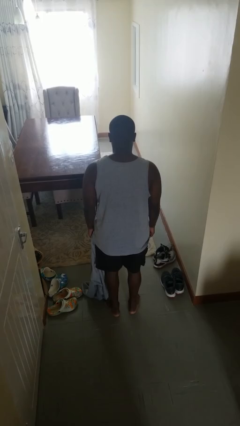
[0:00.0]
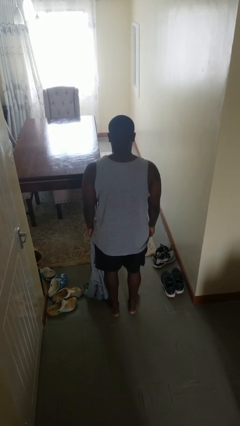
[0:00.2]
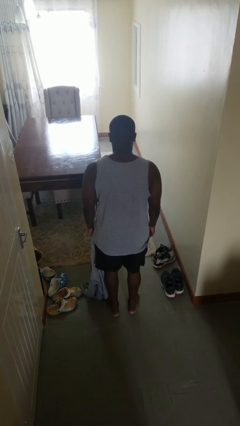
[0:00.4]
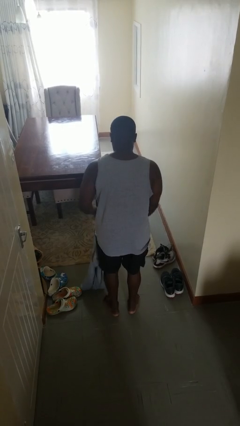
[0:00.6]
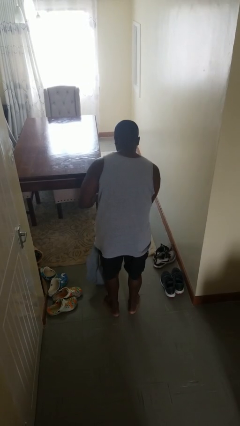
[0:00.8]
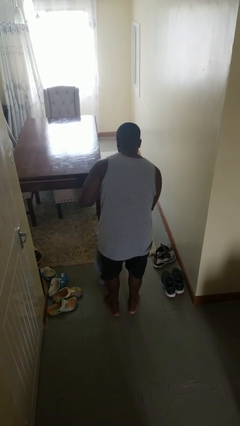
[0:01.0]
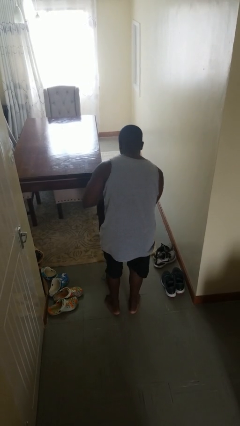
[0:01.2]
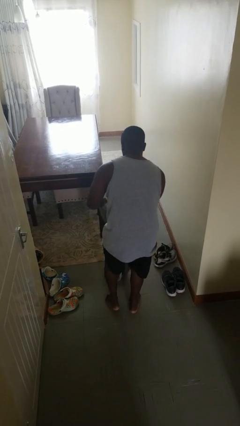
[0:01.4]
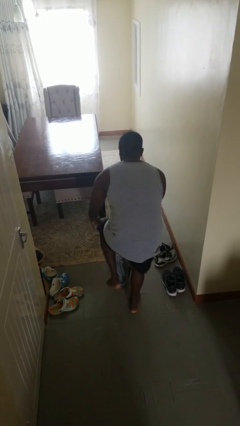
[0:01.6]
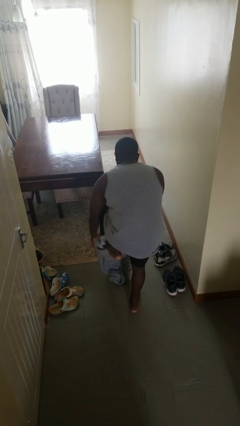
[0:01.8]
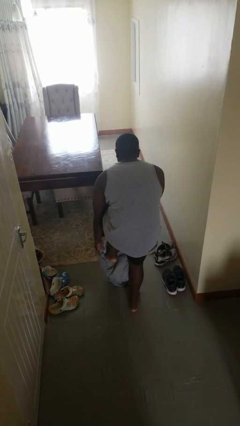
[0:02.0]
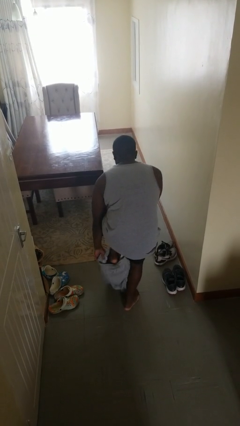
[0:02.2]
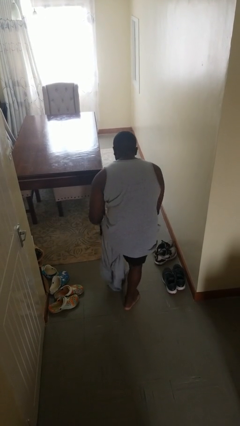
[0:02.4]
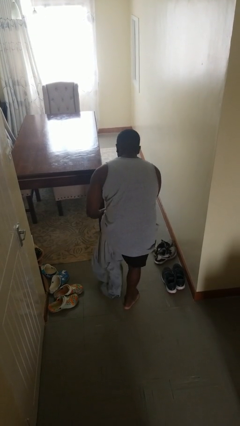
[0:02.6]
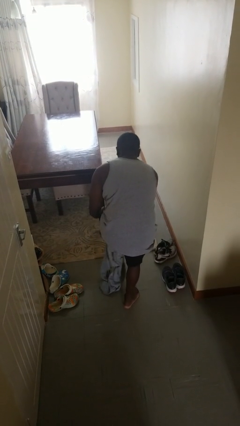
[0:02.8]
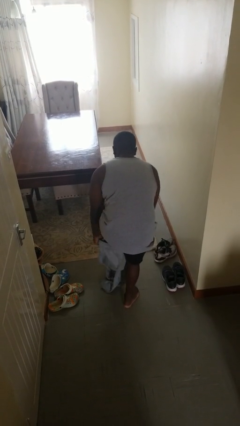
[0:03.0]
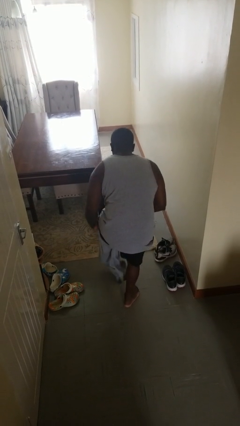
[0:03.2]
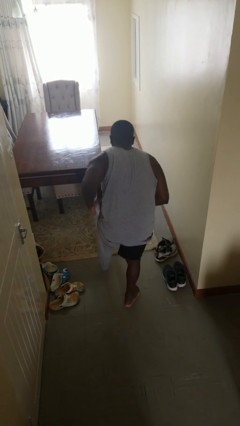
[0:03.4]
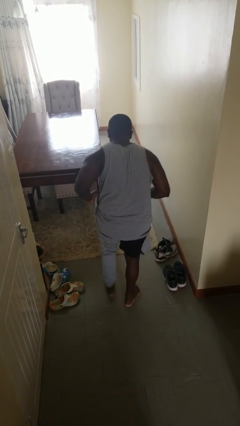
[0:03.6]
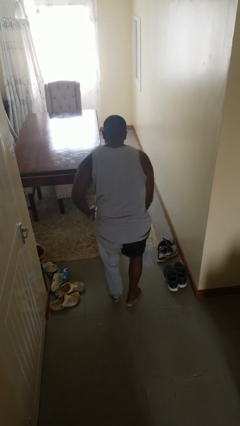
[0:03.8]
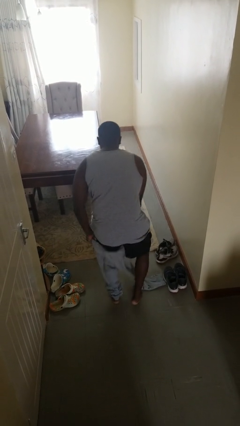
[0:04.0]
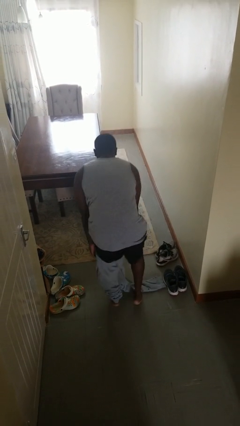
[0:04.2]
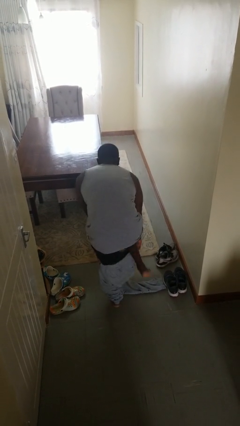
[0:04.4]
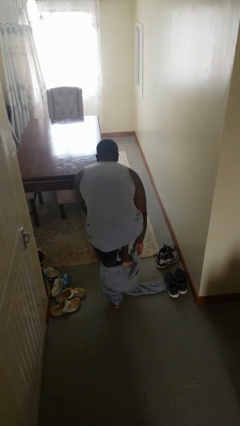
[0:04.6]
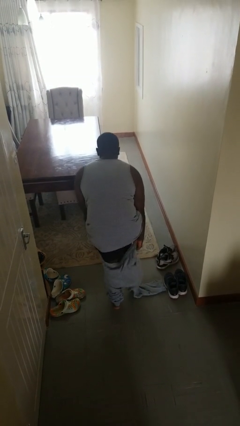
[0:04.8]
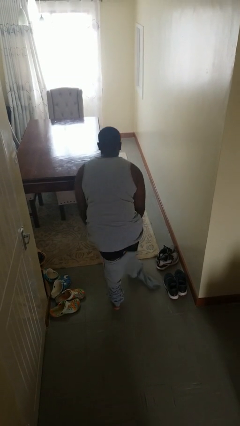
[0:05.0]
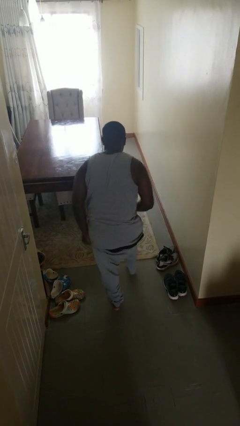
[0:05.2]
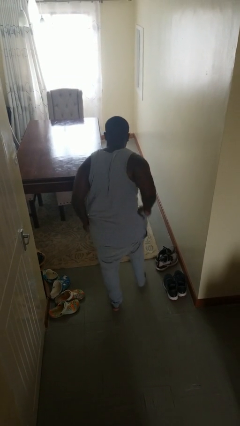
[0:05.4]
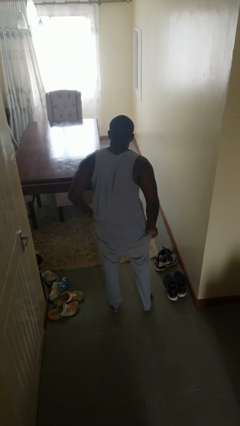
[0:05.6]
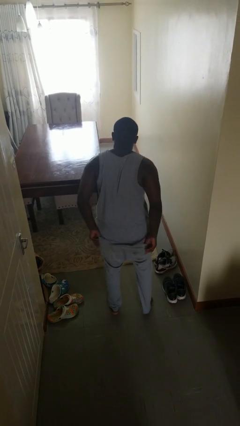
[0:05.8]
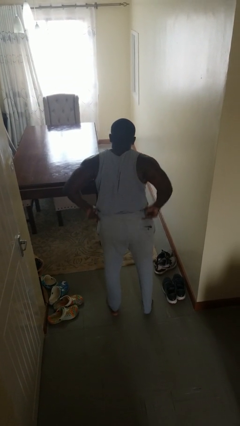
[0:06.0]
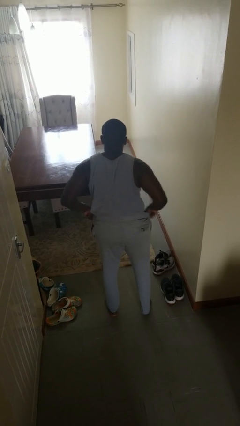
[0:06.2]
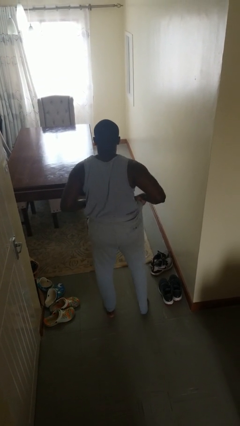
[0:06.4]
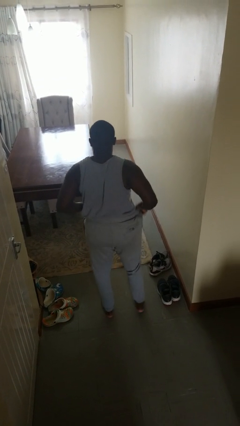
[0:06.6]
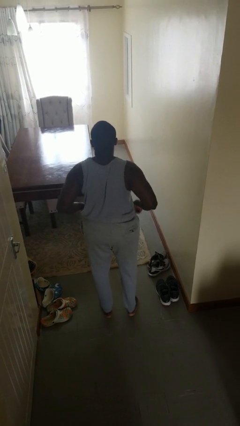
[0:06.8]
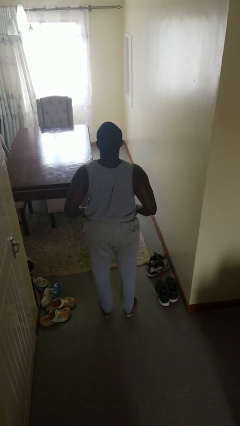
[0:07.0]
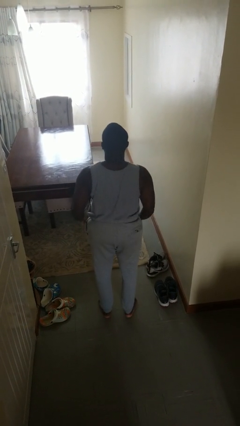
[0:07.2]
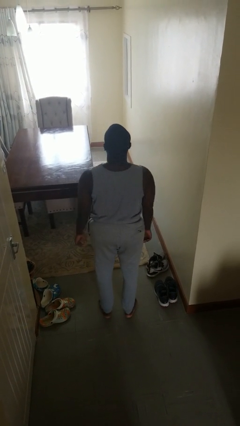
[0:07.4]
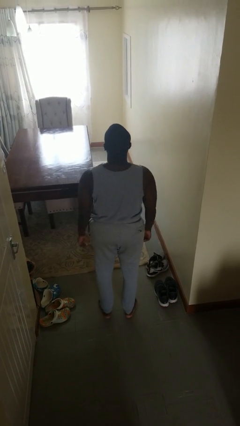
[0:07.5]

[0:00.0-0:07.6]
person puts on pants

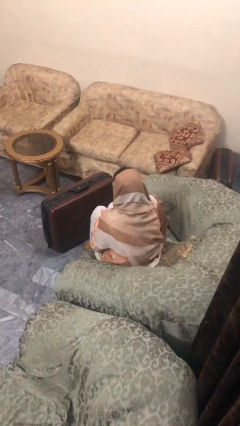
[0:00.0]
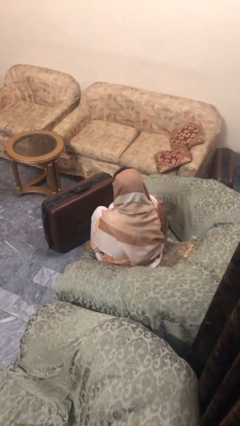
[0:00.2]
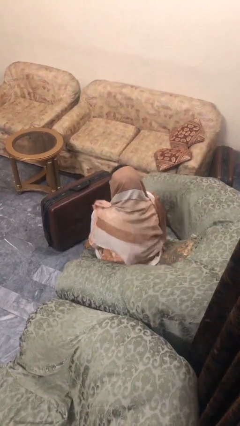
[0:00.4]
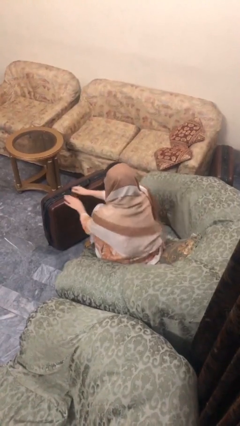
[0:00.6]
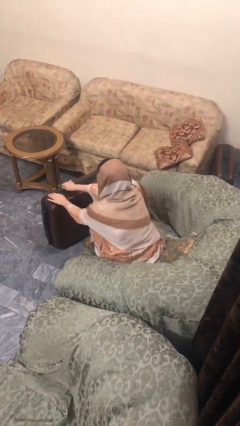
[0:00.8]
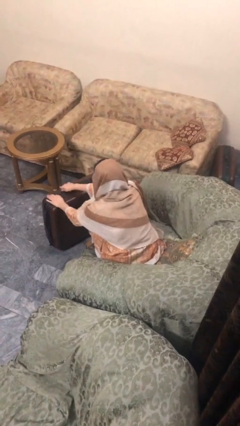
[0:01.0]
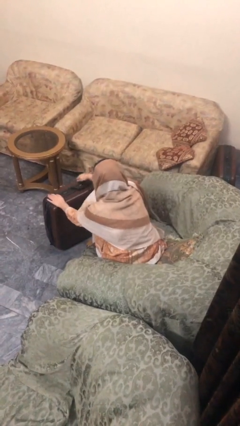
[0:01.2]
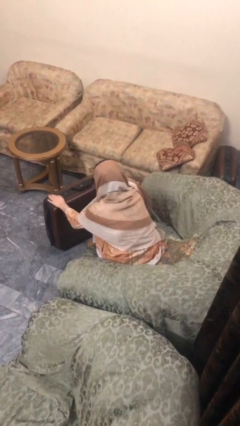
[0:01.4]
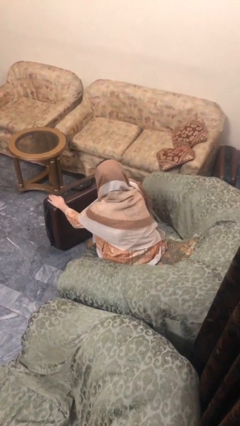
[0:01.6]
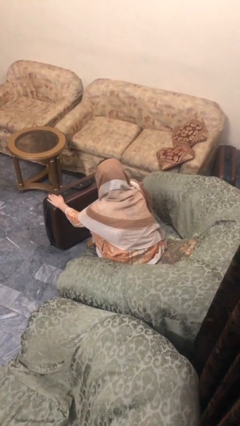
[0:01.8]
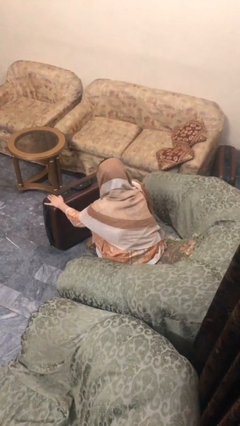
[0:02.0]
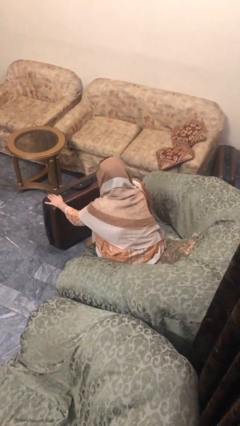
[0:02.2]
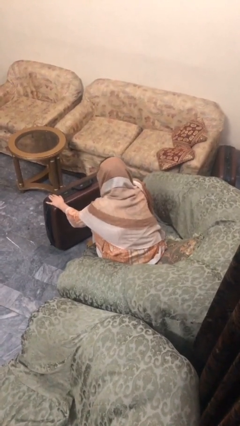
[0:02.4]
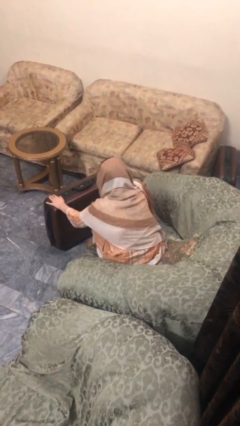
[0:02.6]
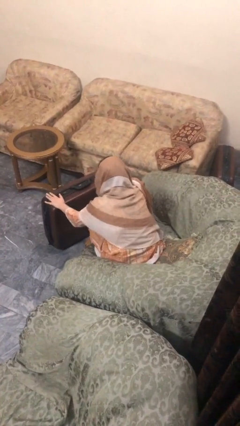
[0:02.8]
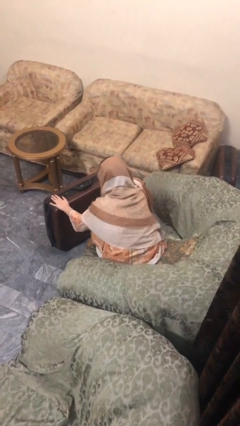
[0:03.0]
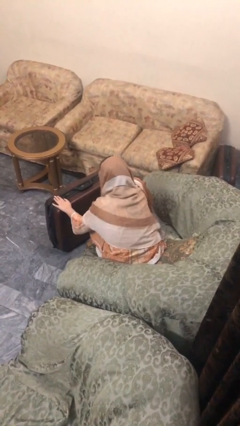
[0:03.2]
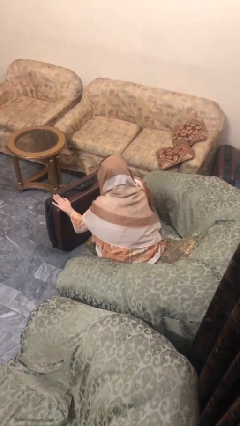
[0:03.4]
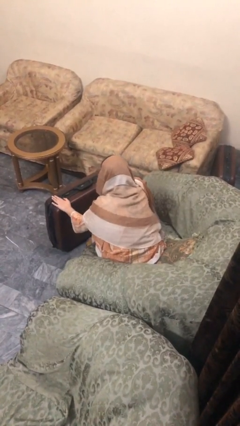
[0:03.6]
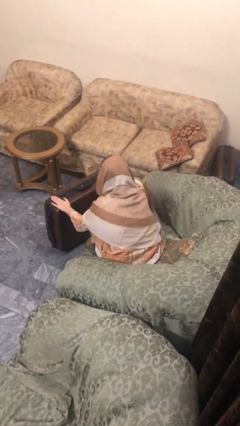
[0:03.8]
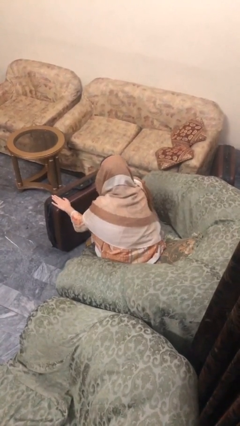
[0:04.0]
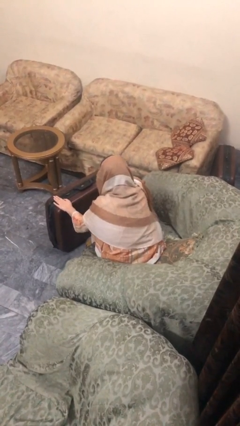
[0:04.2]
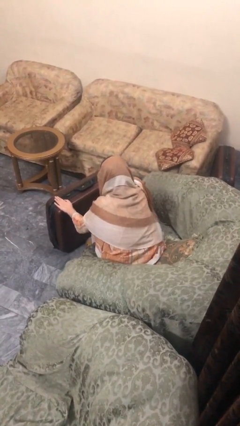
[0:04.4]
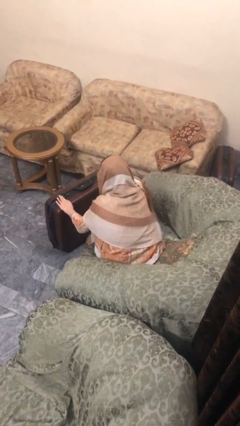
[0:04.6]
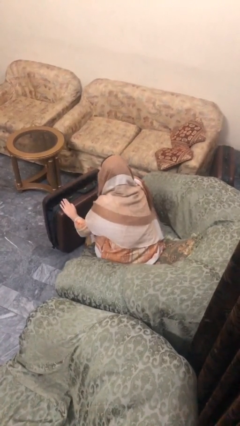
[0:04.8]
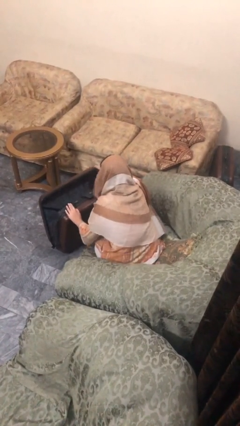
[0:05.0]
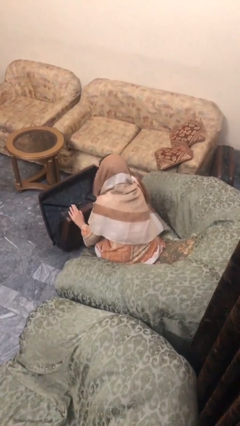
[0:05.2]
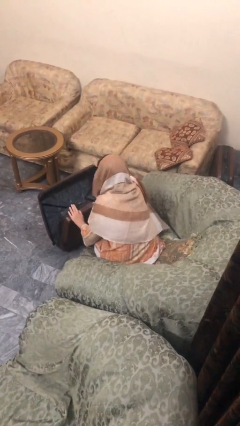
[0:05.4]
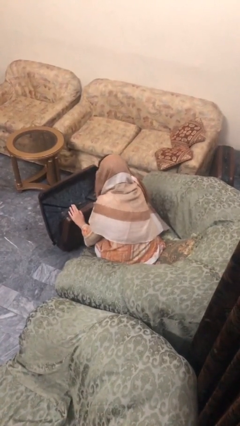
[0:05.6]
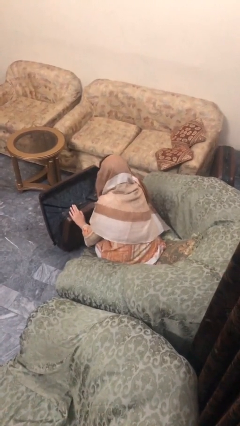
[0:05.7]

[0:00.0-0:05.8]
person opens suitcase

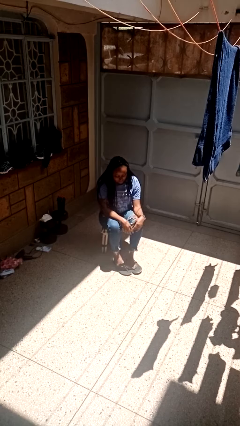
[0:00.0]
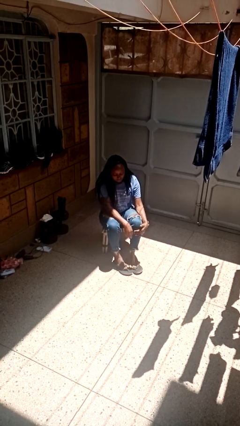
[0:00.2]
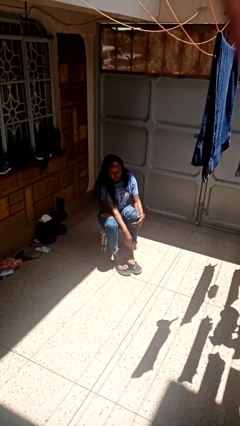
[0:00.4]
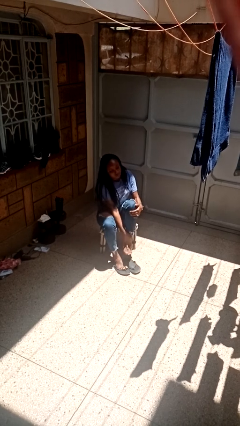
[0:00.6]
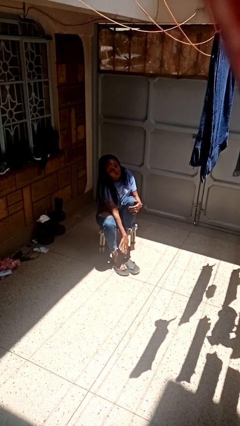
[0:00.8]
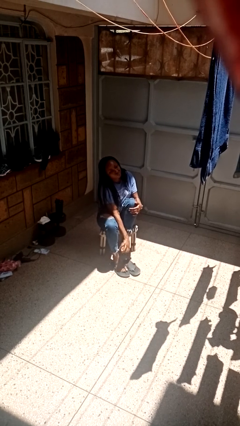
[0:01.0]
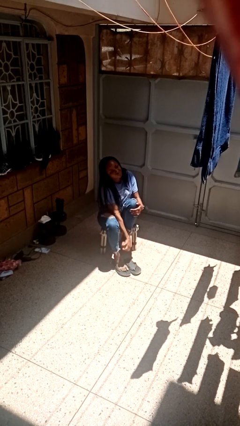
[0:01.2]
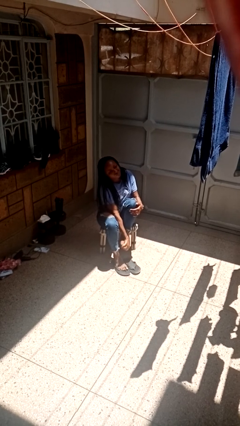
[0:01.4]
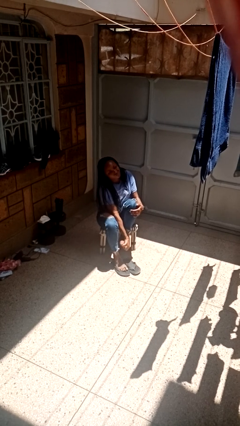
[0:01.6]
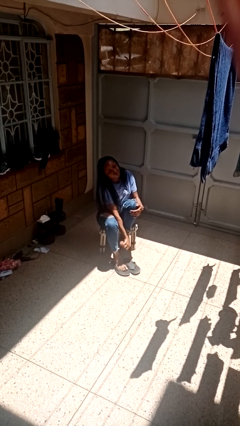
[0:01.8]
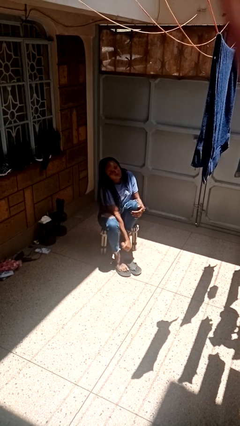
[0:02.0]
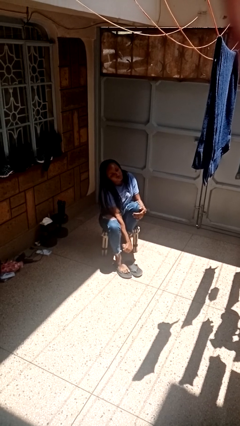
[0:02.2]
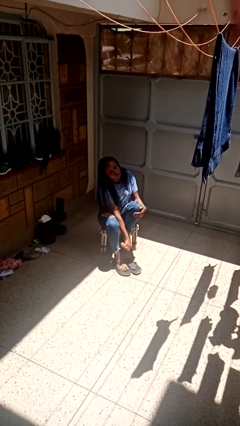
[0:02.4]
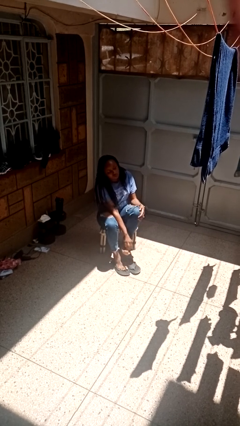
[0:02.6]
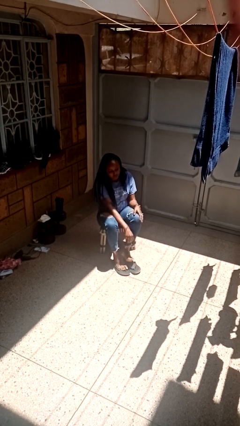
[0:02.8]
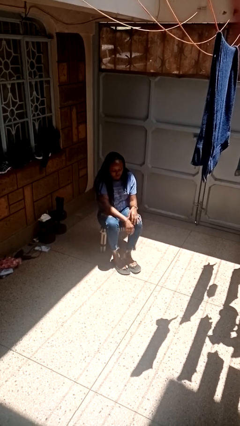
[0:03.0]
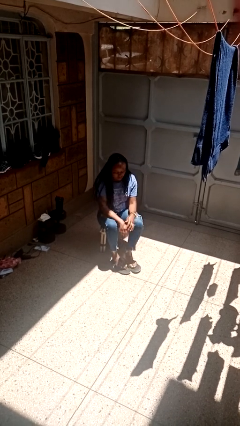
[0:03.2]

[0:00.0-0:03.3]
person rubs foot

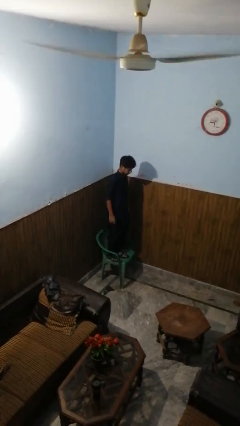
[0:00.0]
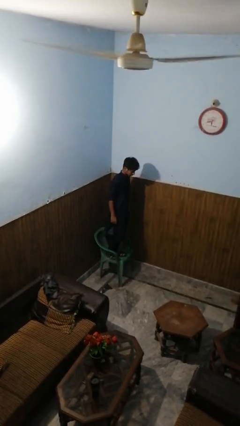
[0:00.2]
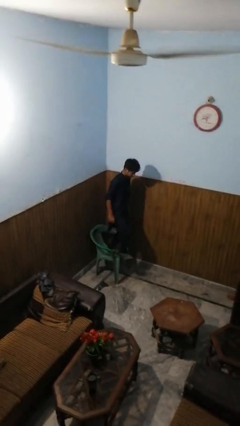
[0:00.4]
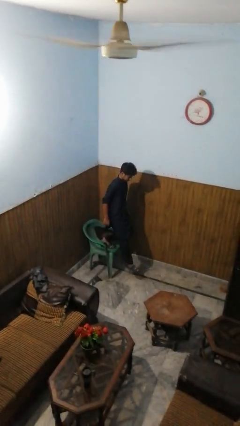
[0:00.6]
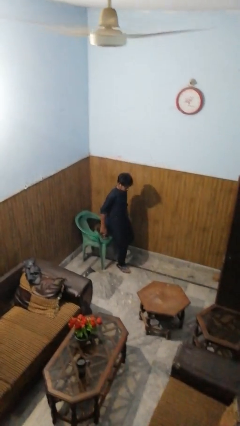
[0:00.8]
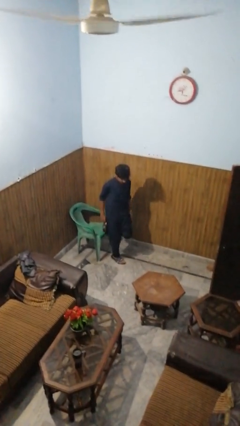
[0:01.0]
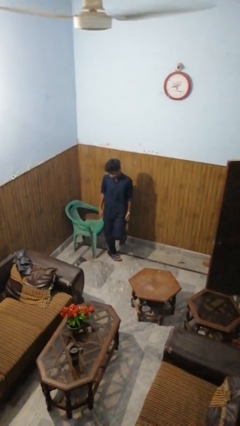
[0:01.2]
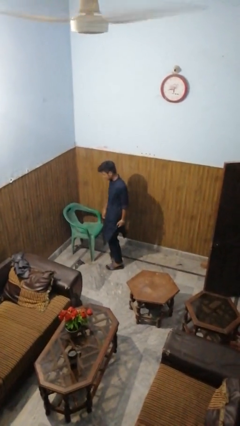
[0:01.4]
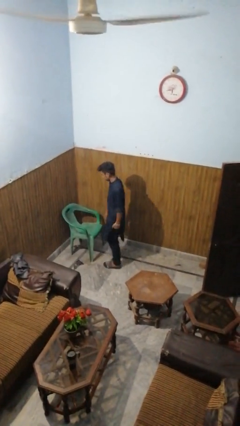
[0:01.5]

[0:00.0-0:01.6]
person climbs off chair
